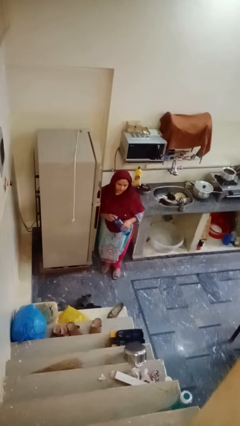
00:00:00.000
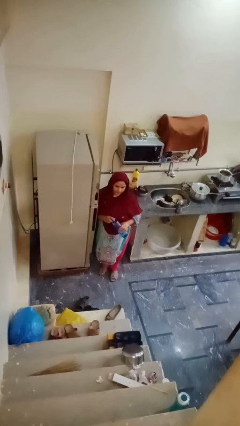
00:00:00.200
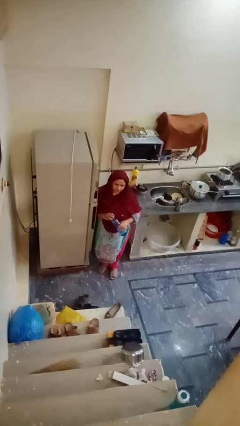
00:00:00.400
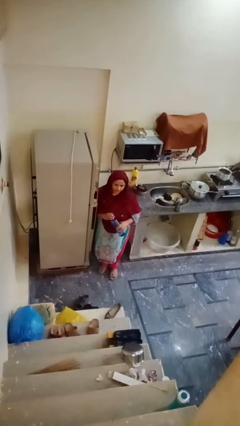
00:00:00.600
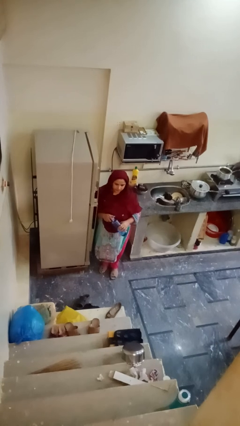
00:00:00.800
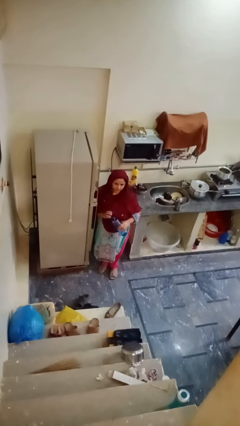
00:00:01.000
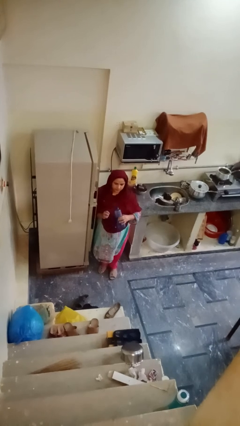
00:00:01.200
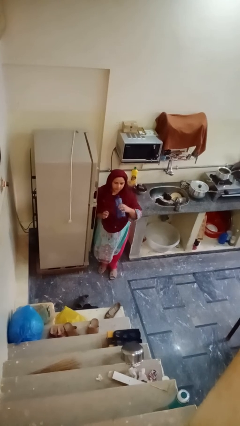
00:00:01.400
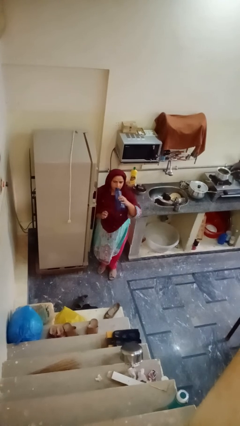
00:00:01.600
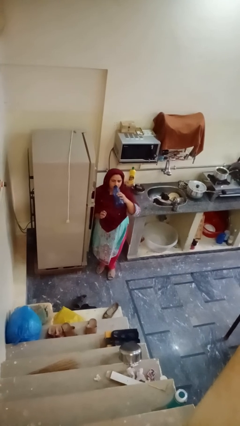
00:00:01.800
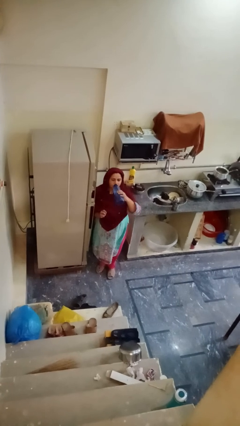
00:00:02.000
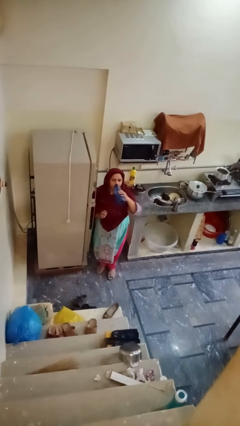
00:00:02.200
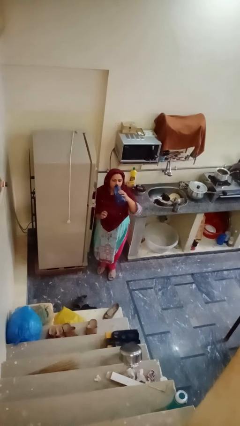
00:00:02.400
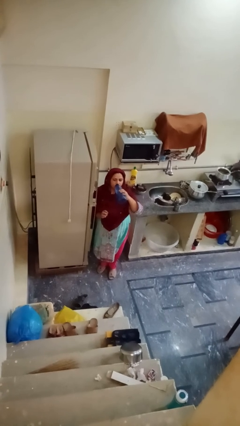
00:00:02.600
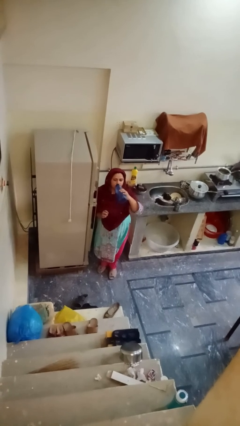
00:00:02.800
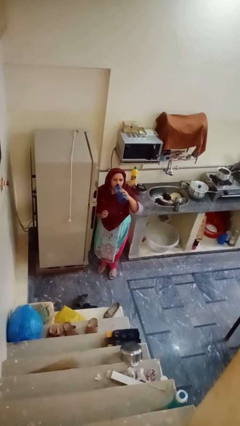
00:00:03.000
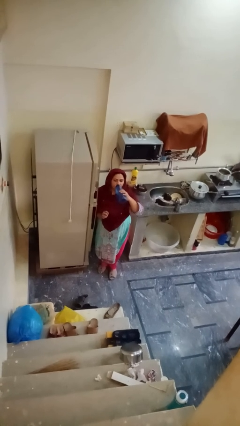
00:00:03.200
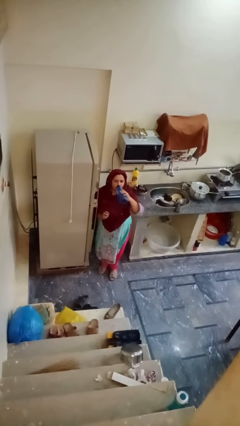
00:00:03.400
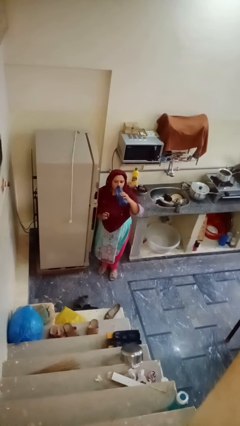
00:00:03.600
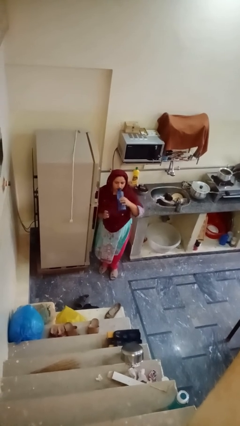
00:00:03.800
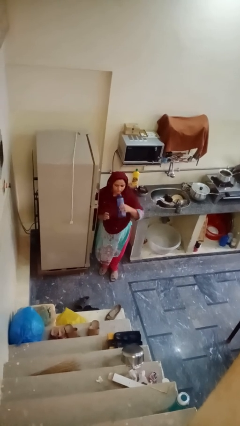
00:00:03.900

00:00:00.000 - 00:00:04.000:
person drinks from bottle

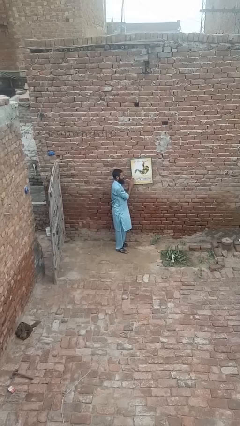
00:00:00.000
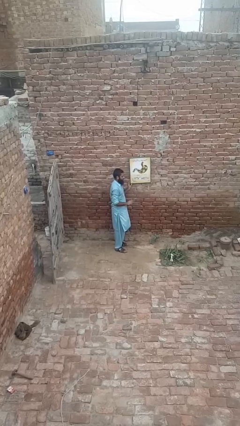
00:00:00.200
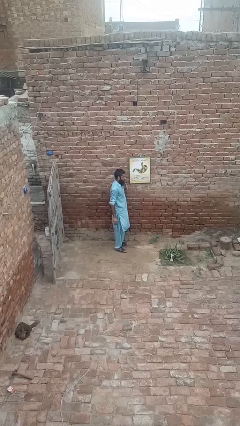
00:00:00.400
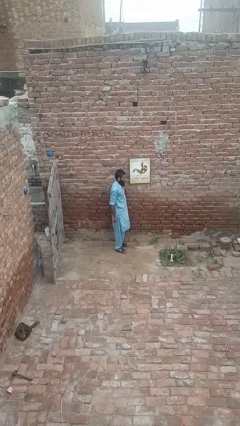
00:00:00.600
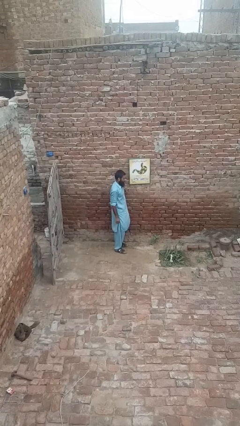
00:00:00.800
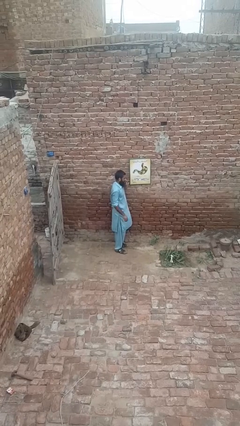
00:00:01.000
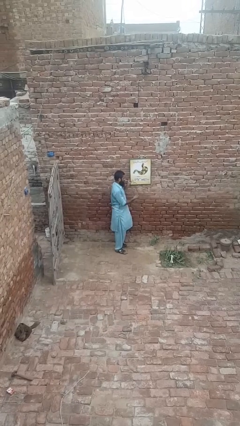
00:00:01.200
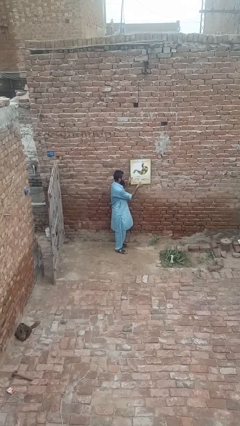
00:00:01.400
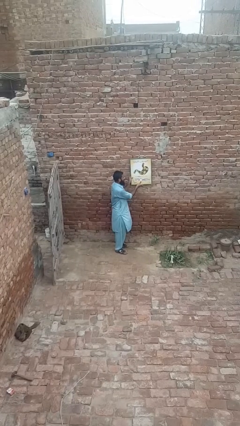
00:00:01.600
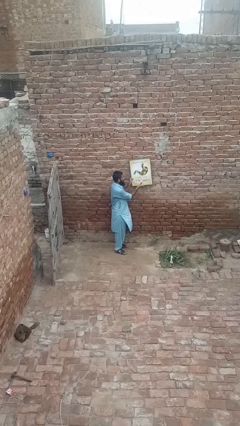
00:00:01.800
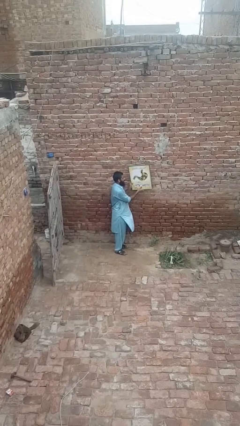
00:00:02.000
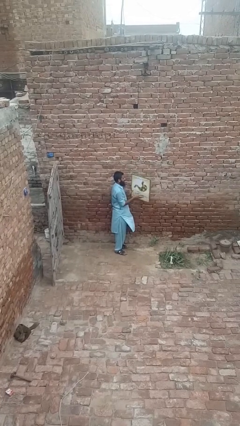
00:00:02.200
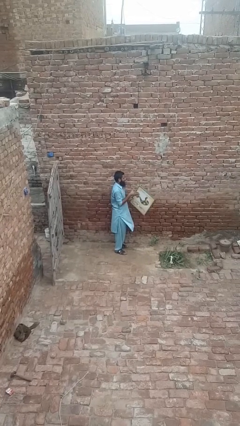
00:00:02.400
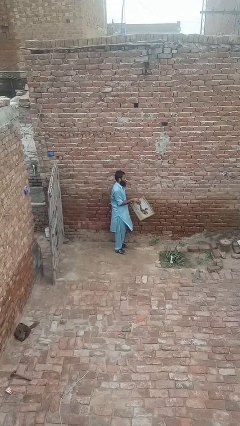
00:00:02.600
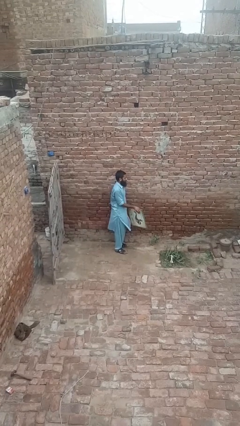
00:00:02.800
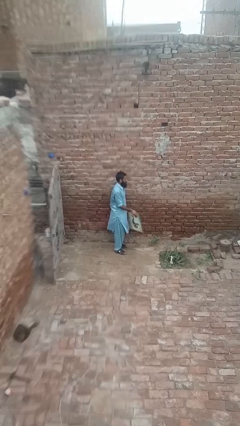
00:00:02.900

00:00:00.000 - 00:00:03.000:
person takes down picture frame

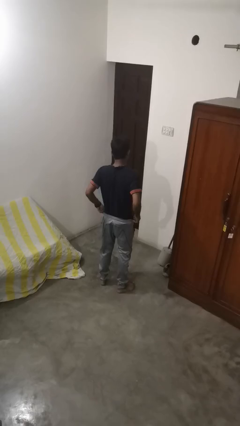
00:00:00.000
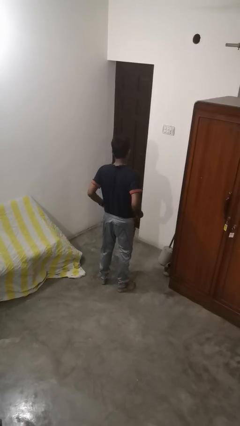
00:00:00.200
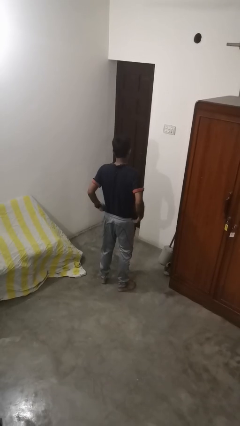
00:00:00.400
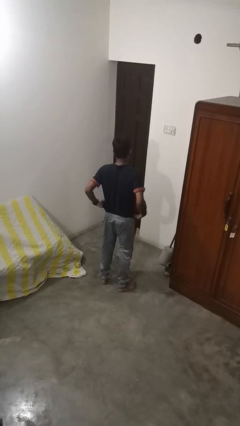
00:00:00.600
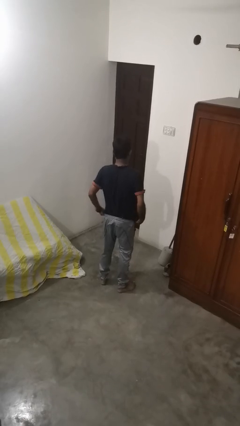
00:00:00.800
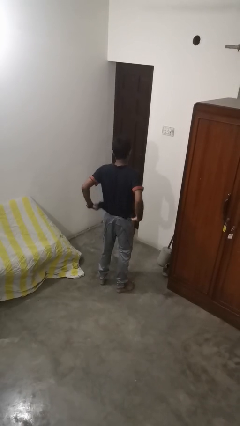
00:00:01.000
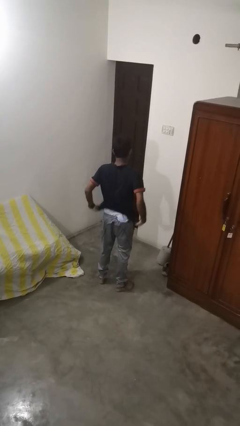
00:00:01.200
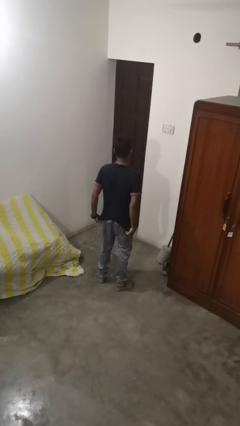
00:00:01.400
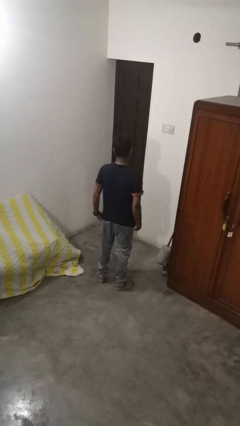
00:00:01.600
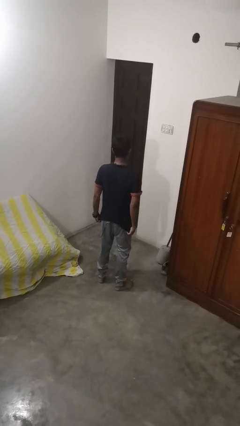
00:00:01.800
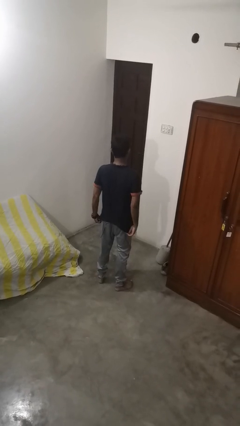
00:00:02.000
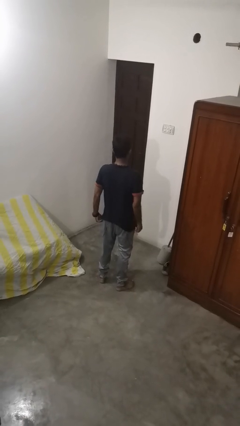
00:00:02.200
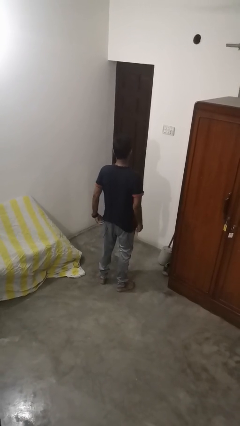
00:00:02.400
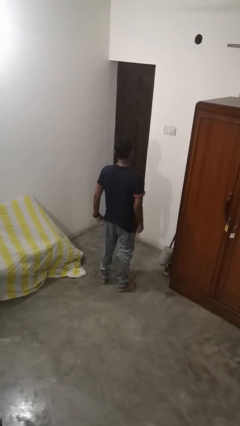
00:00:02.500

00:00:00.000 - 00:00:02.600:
person untucks shirt

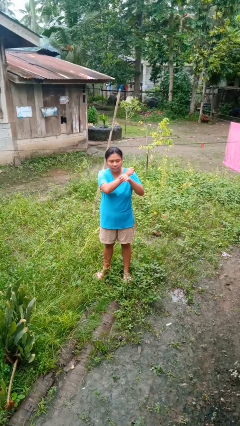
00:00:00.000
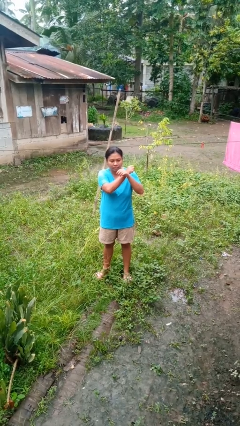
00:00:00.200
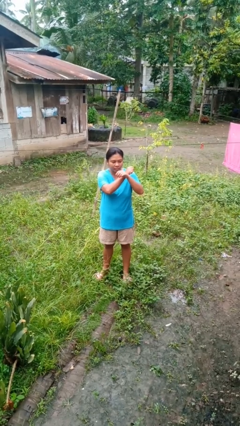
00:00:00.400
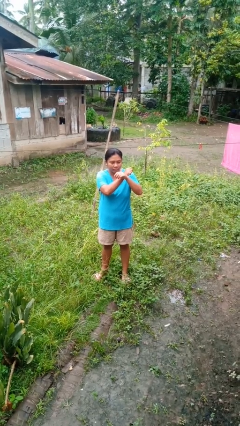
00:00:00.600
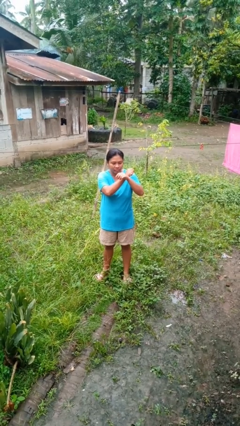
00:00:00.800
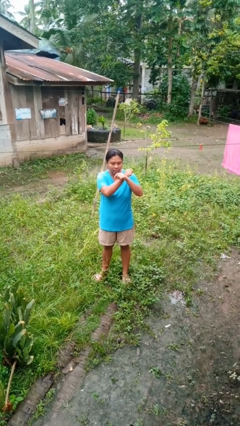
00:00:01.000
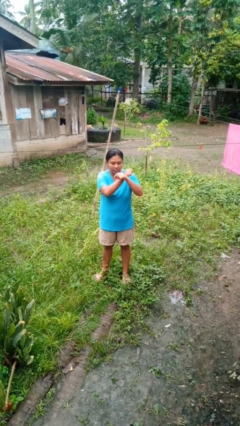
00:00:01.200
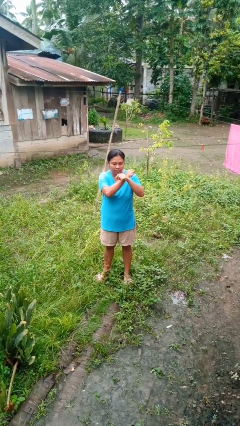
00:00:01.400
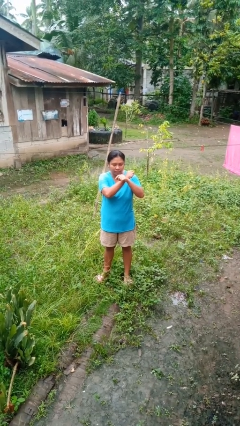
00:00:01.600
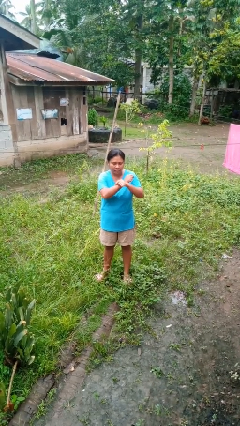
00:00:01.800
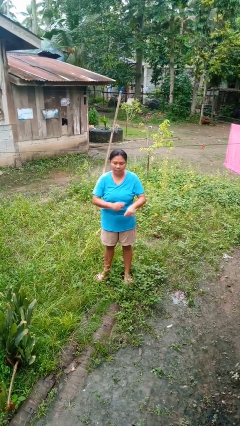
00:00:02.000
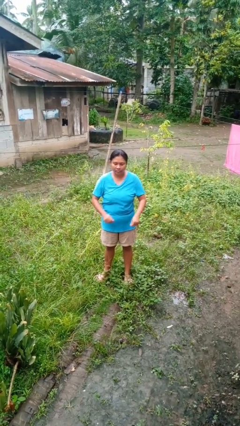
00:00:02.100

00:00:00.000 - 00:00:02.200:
person gestures arms x

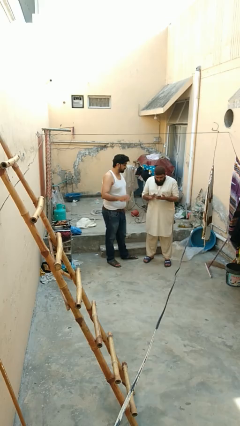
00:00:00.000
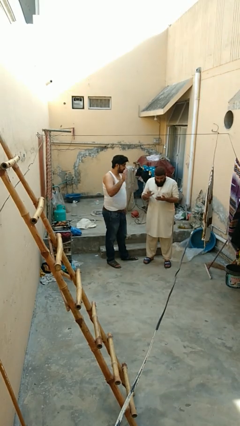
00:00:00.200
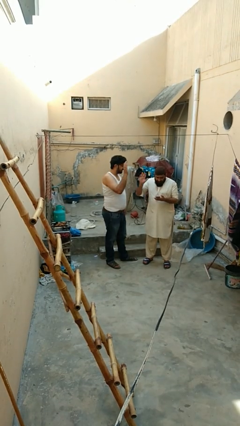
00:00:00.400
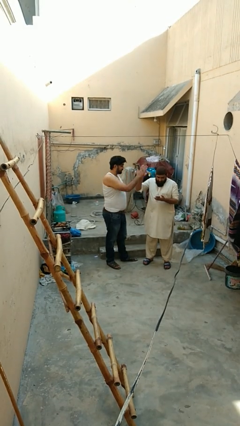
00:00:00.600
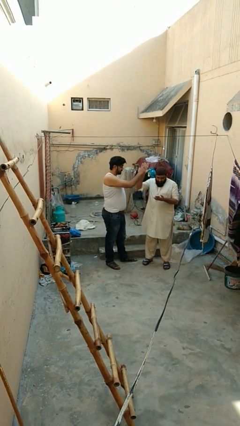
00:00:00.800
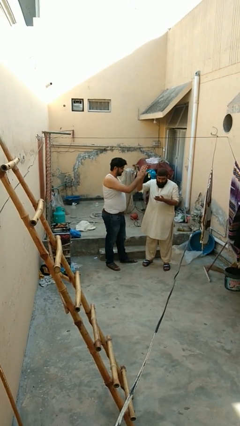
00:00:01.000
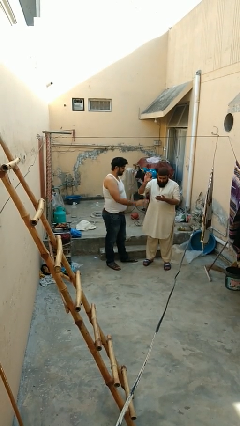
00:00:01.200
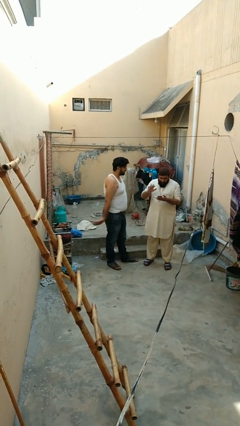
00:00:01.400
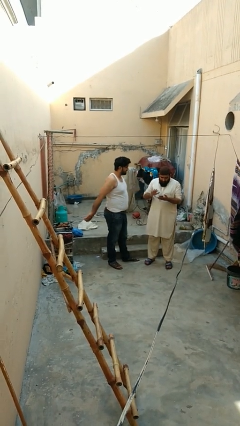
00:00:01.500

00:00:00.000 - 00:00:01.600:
person highfives hand

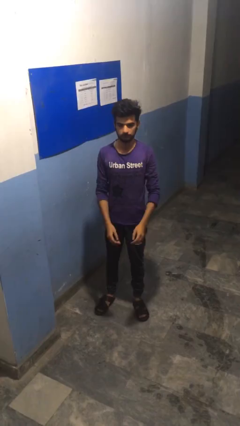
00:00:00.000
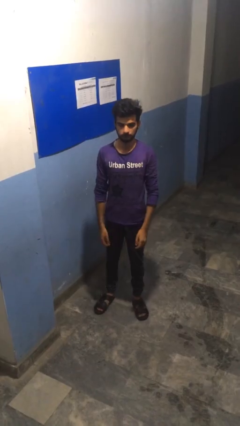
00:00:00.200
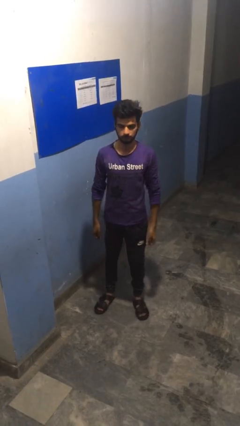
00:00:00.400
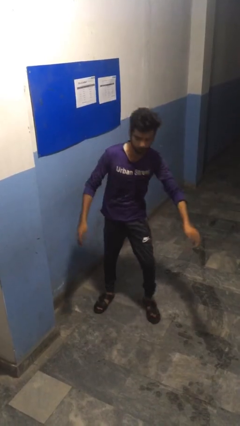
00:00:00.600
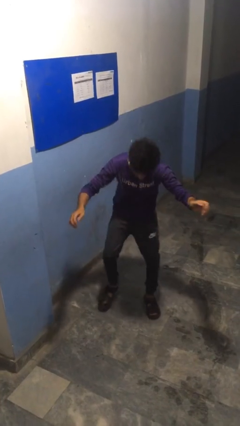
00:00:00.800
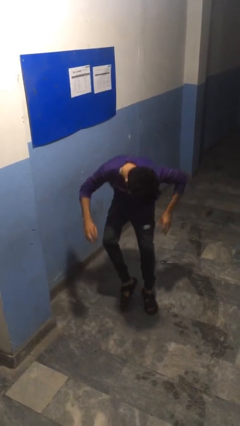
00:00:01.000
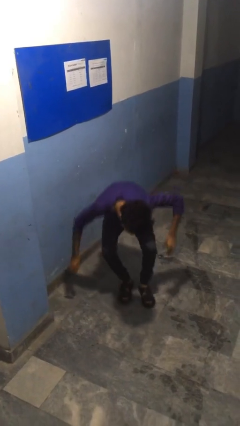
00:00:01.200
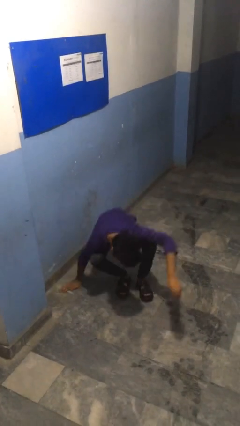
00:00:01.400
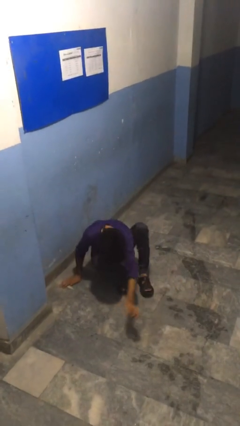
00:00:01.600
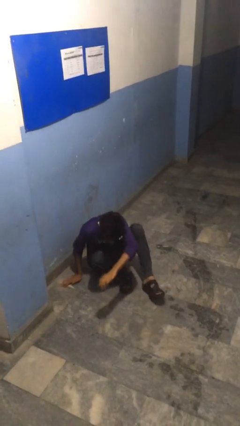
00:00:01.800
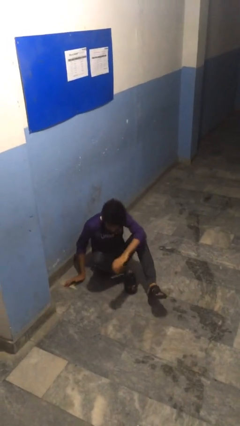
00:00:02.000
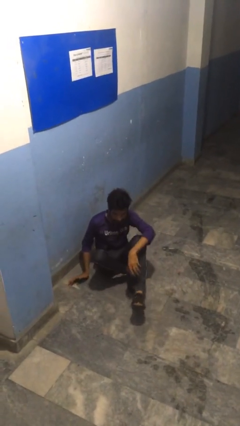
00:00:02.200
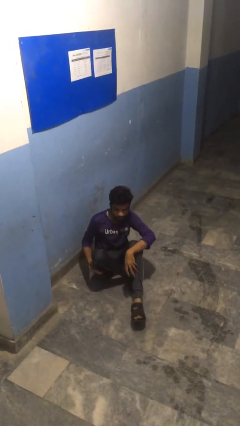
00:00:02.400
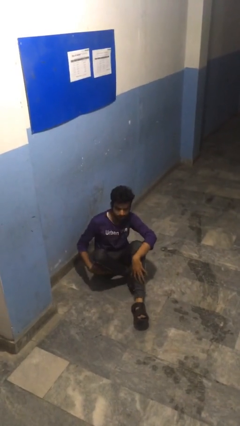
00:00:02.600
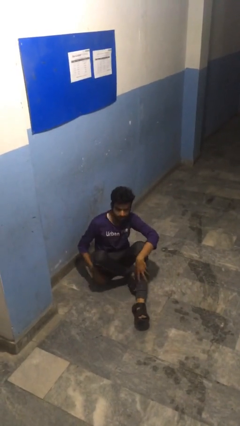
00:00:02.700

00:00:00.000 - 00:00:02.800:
person falls while standing

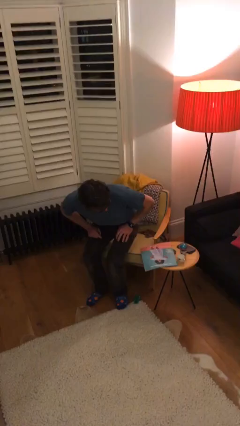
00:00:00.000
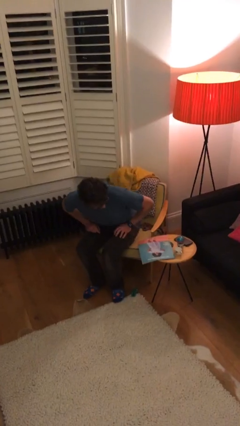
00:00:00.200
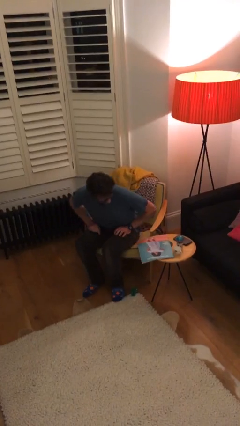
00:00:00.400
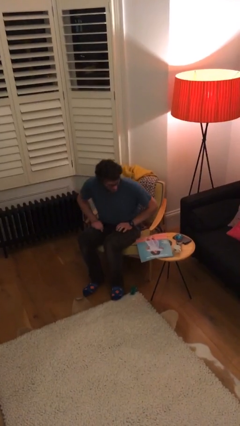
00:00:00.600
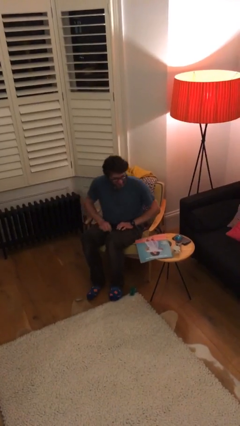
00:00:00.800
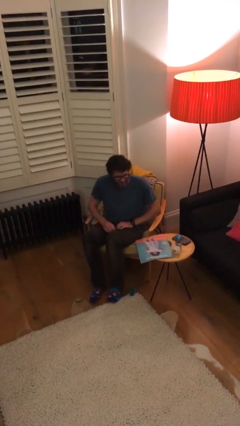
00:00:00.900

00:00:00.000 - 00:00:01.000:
person sits down

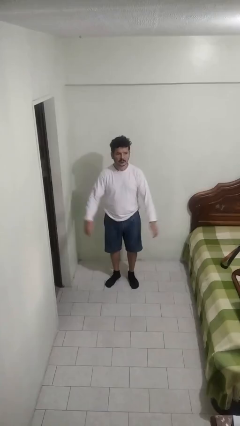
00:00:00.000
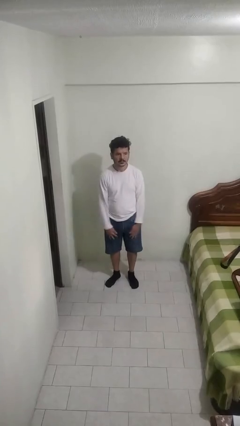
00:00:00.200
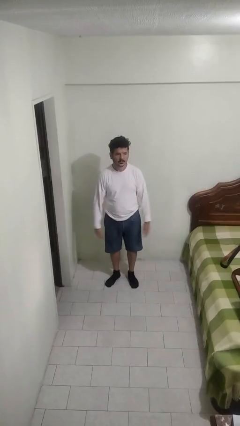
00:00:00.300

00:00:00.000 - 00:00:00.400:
person slaps hands on thighs
